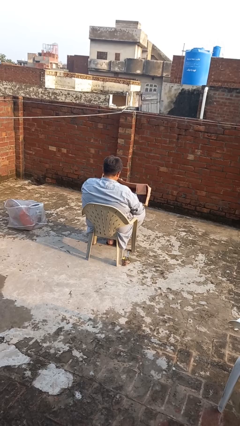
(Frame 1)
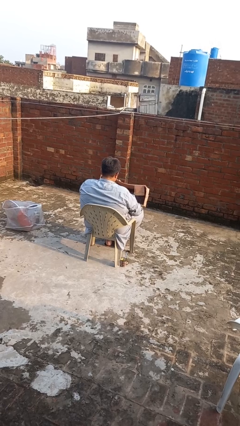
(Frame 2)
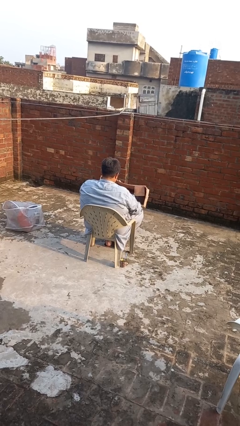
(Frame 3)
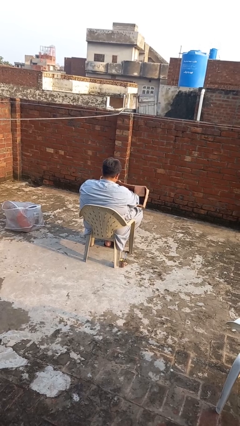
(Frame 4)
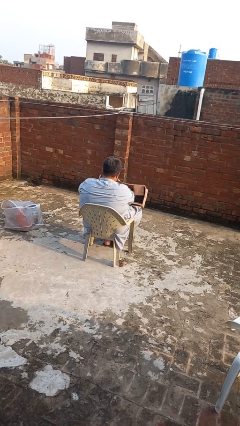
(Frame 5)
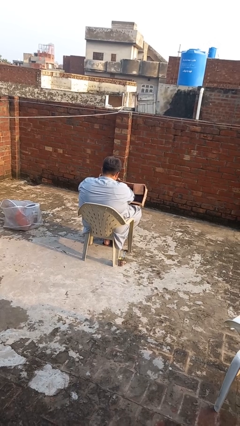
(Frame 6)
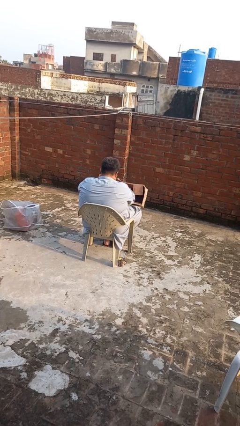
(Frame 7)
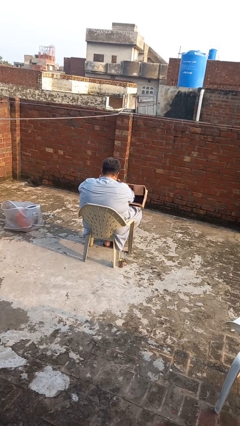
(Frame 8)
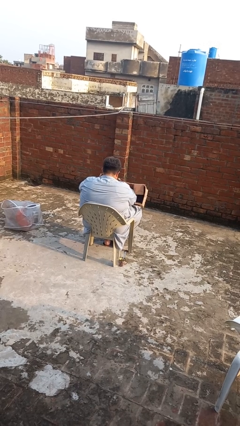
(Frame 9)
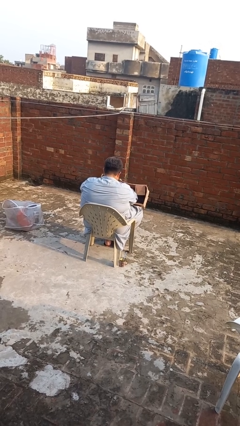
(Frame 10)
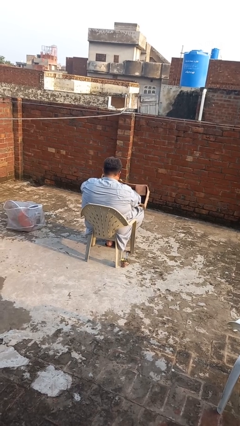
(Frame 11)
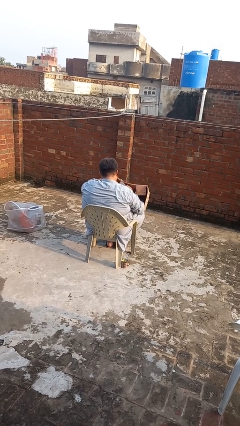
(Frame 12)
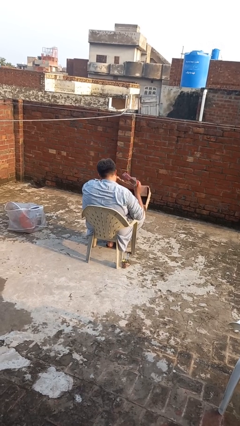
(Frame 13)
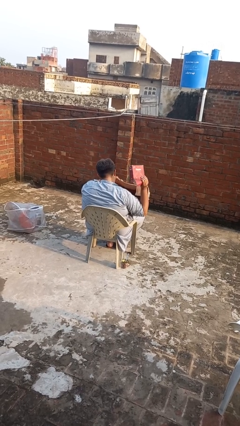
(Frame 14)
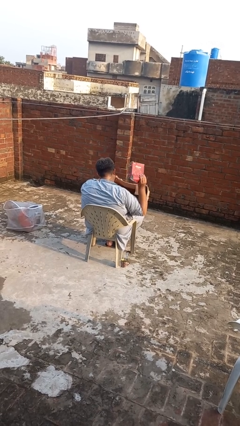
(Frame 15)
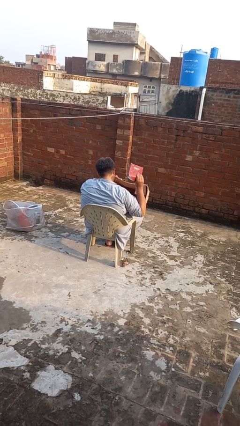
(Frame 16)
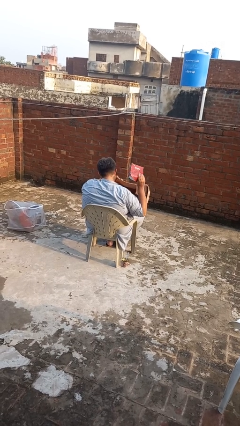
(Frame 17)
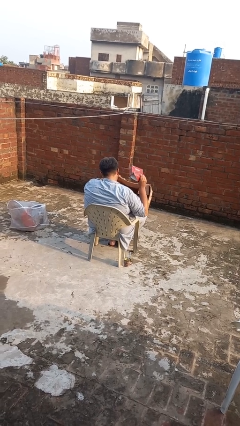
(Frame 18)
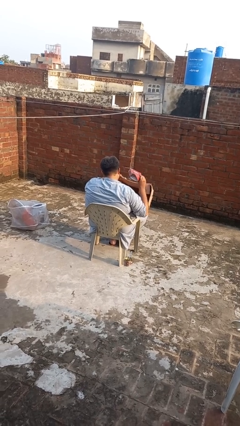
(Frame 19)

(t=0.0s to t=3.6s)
person searches in box

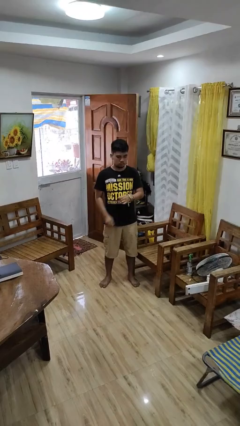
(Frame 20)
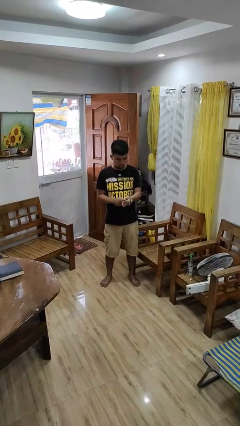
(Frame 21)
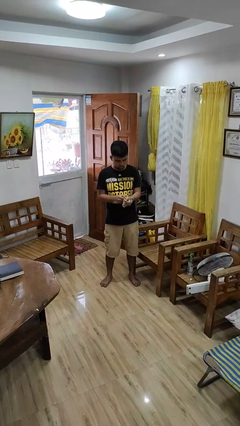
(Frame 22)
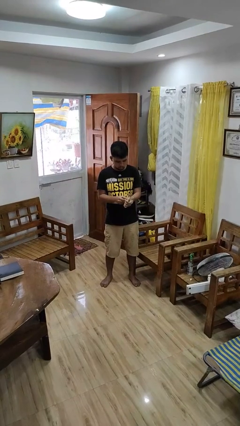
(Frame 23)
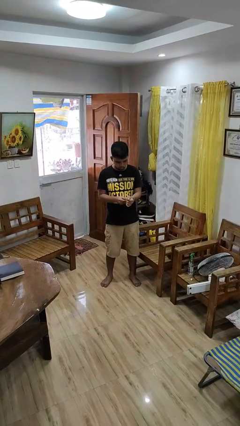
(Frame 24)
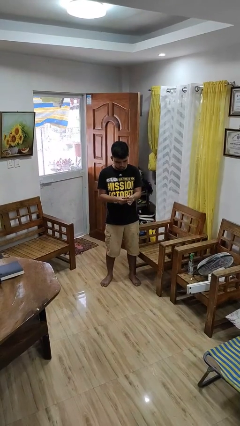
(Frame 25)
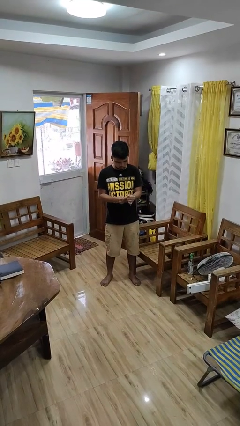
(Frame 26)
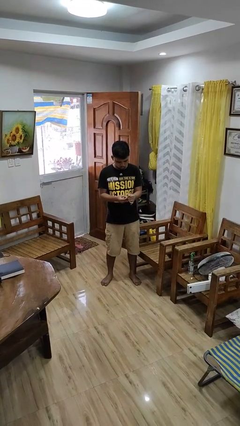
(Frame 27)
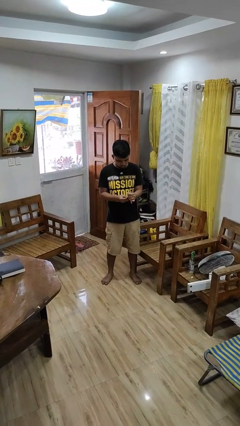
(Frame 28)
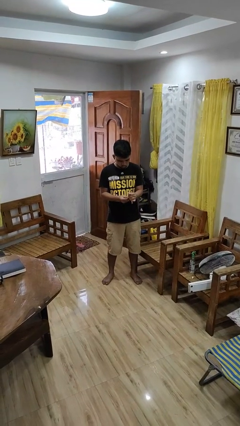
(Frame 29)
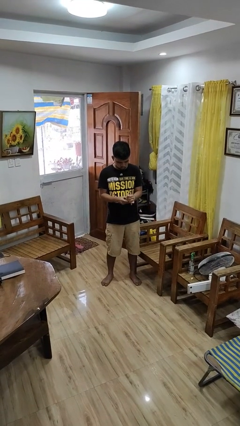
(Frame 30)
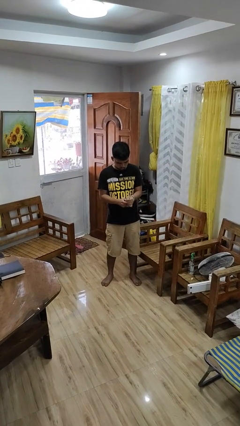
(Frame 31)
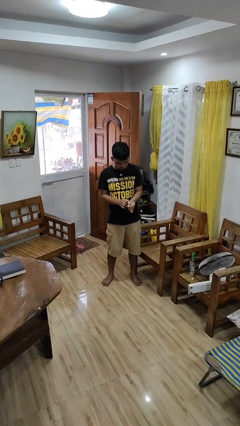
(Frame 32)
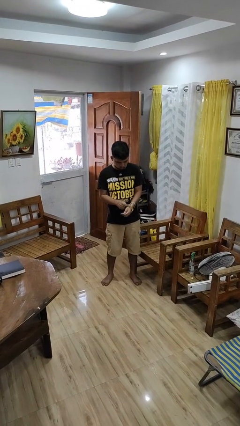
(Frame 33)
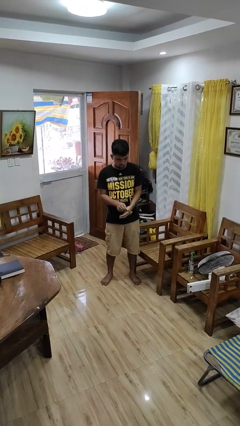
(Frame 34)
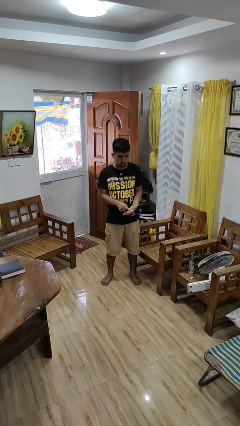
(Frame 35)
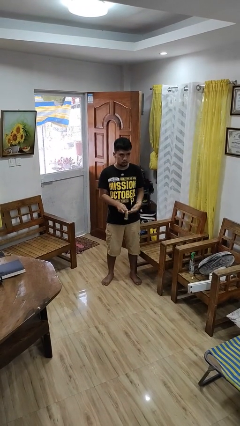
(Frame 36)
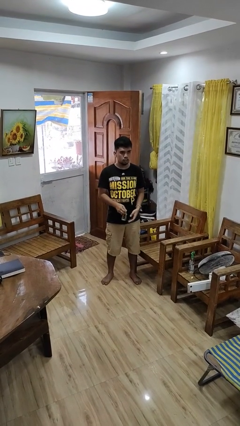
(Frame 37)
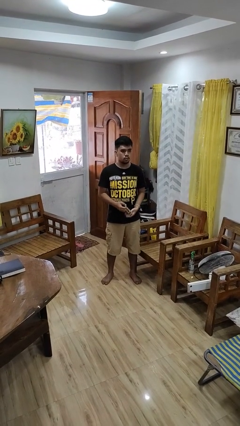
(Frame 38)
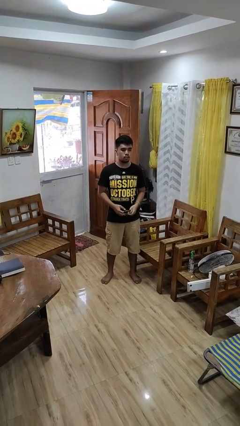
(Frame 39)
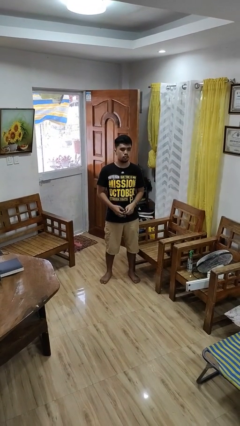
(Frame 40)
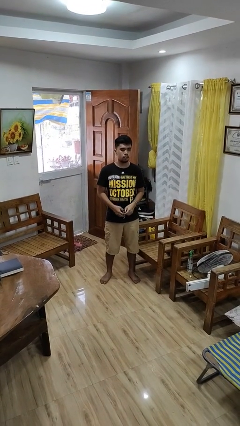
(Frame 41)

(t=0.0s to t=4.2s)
person takes off wristwatch

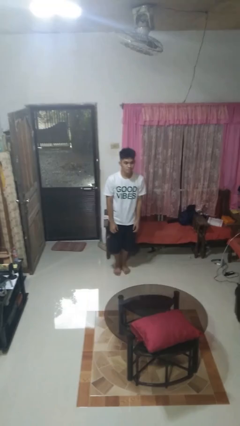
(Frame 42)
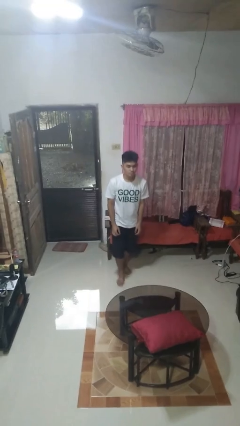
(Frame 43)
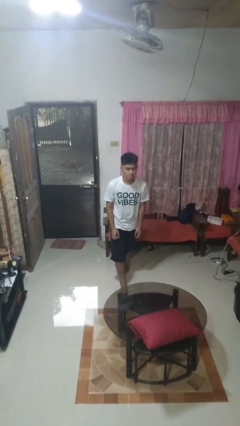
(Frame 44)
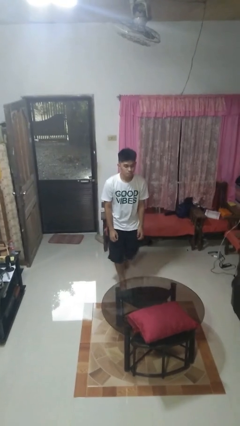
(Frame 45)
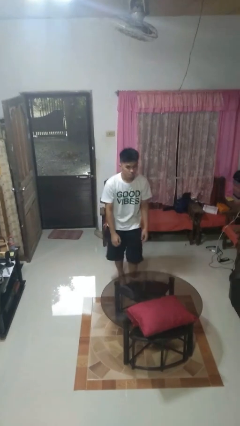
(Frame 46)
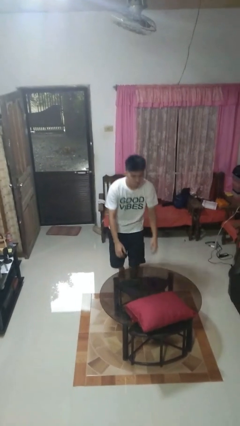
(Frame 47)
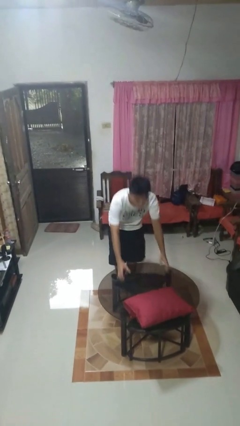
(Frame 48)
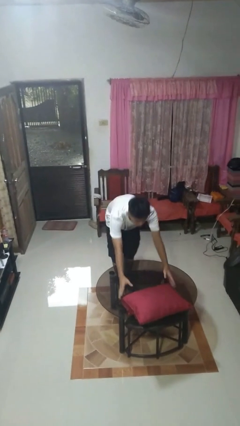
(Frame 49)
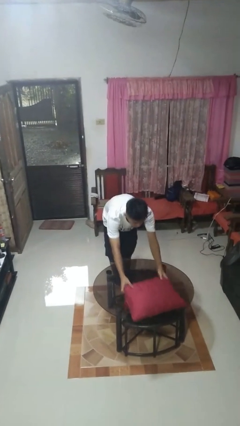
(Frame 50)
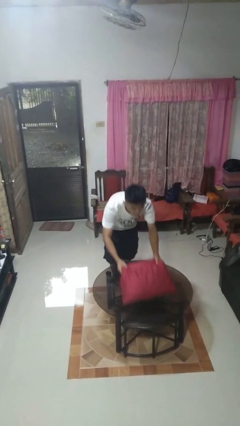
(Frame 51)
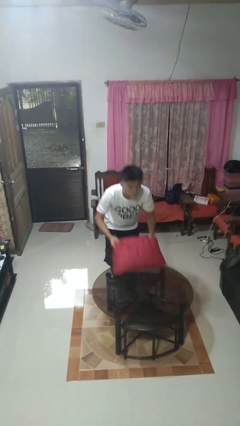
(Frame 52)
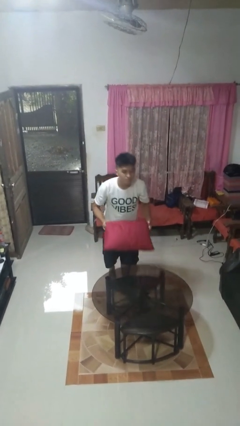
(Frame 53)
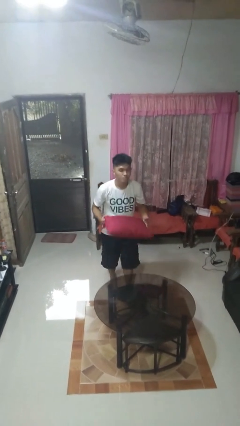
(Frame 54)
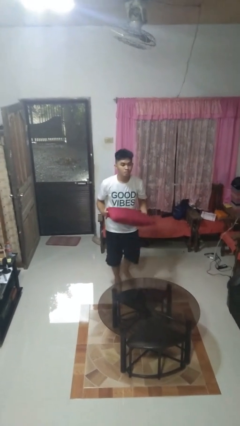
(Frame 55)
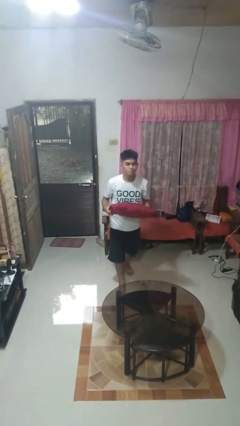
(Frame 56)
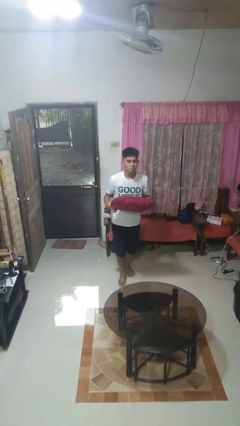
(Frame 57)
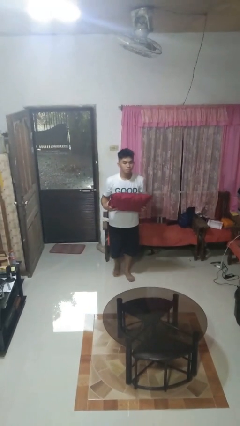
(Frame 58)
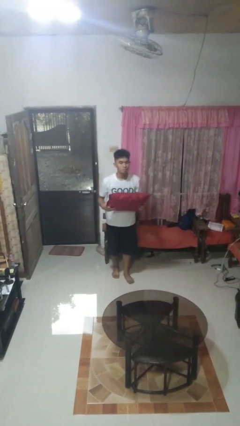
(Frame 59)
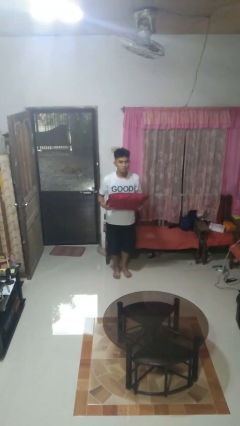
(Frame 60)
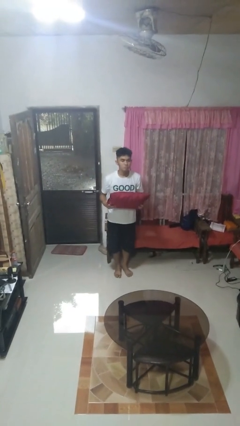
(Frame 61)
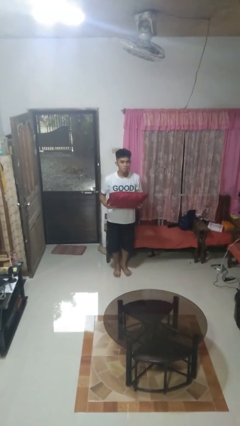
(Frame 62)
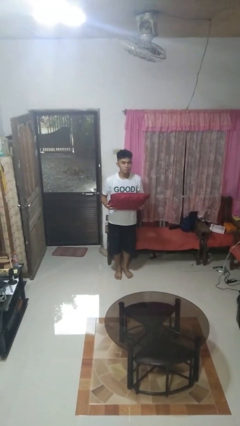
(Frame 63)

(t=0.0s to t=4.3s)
person picks up object from table

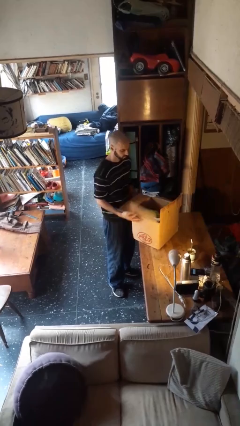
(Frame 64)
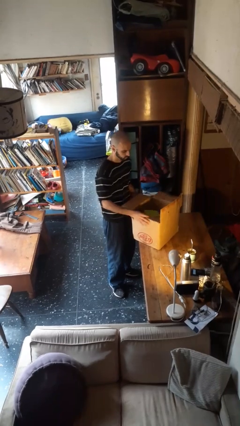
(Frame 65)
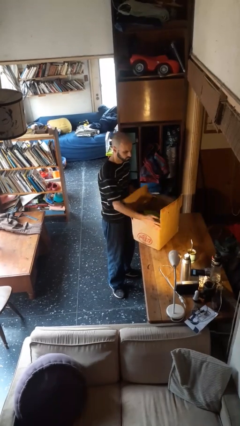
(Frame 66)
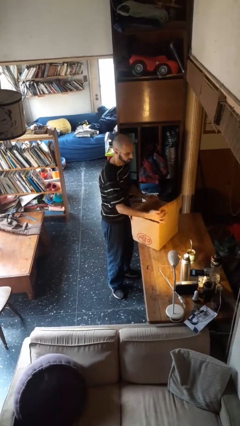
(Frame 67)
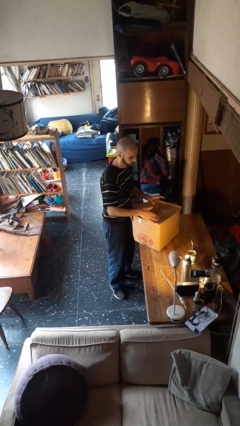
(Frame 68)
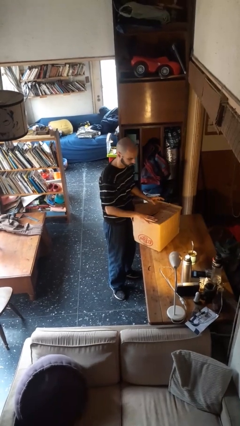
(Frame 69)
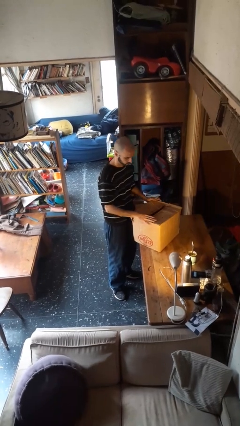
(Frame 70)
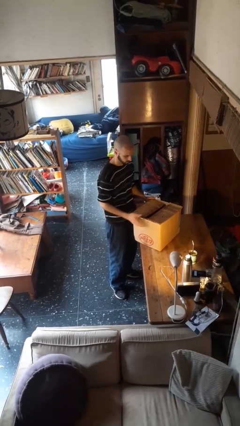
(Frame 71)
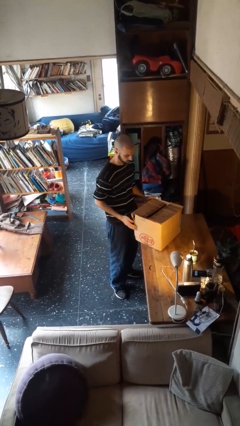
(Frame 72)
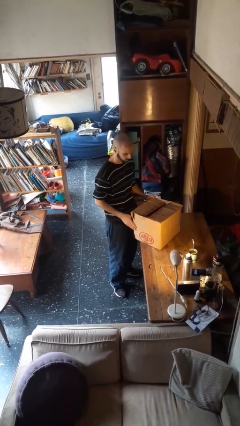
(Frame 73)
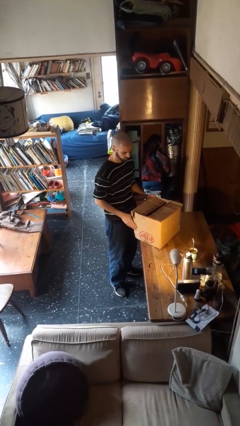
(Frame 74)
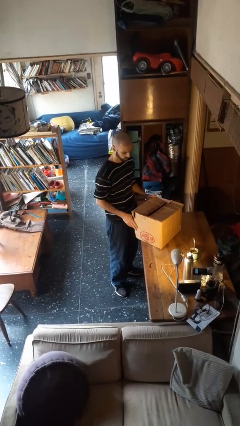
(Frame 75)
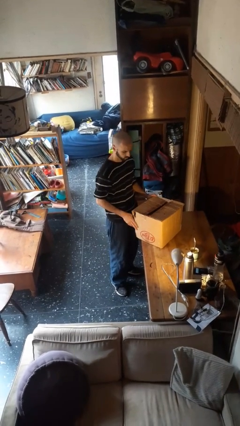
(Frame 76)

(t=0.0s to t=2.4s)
person closes box

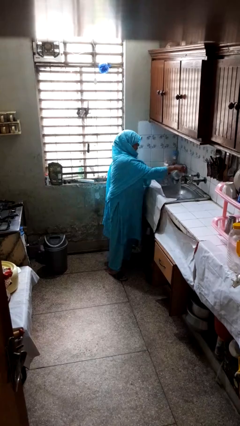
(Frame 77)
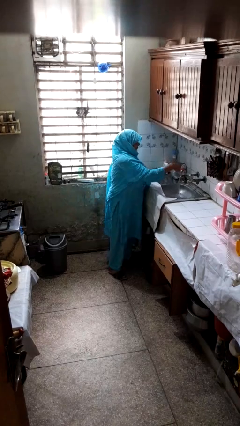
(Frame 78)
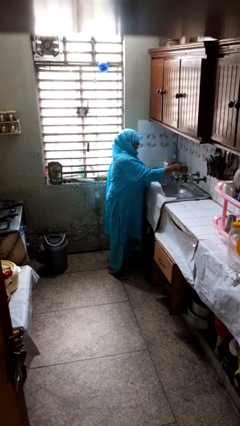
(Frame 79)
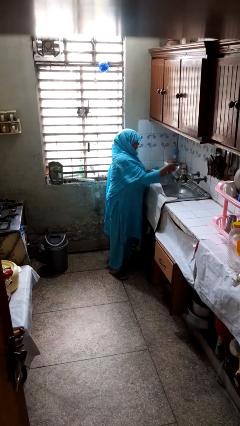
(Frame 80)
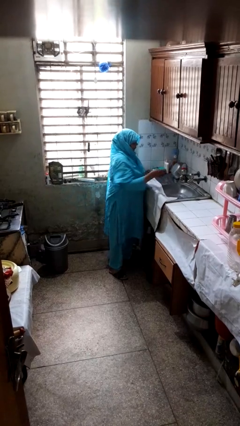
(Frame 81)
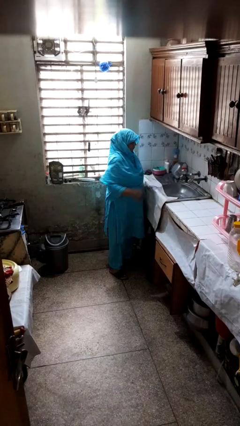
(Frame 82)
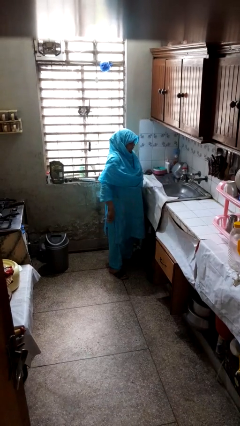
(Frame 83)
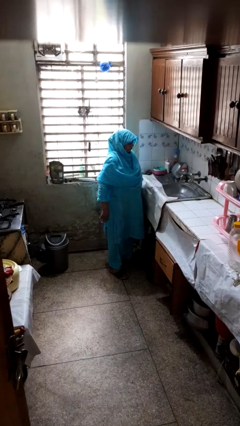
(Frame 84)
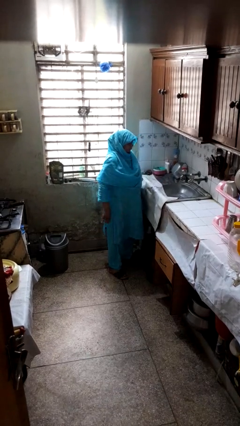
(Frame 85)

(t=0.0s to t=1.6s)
person turns off faucet

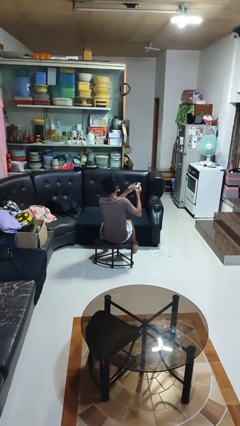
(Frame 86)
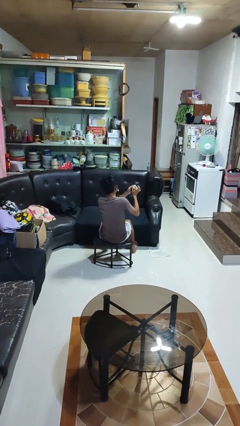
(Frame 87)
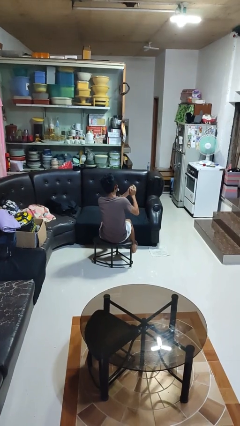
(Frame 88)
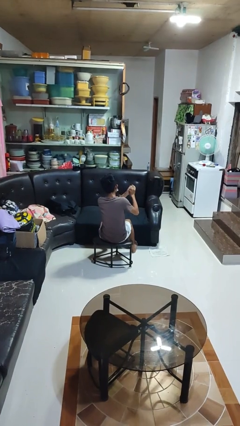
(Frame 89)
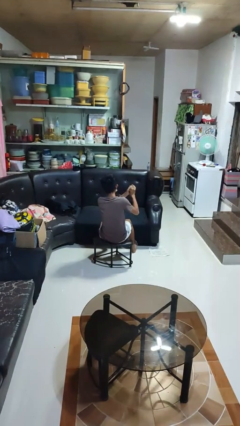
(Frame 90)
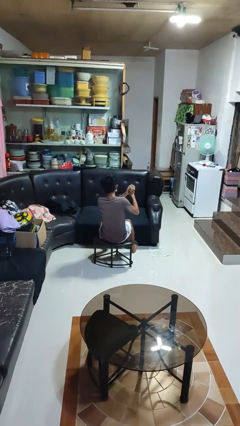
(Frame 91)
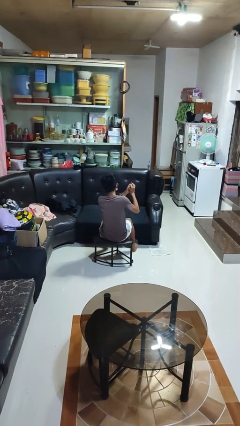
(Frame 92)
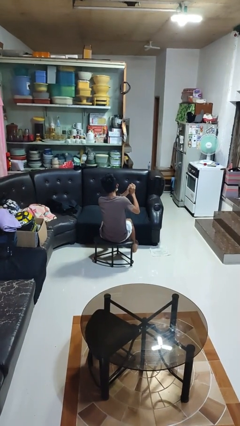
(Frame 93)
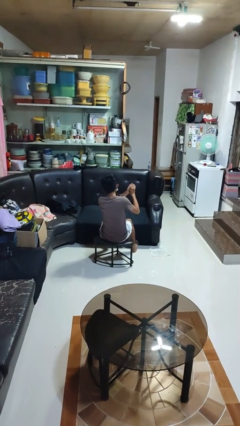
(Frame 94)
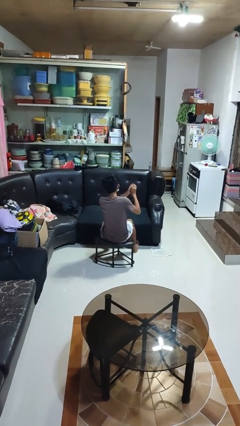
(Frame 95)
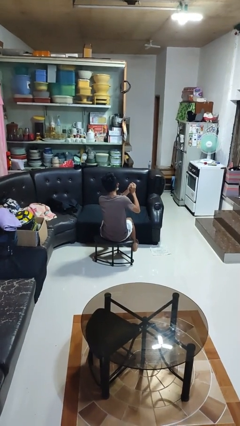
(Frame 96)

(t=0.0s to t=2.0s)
person crumples paper
